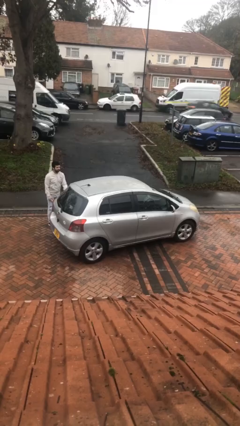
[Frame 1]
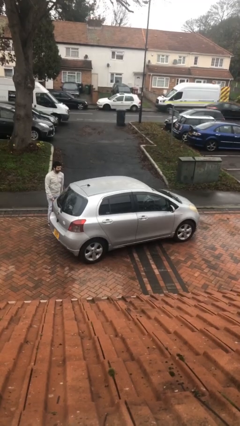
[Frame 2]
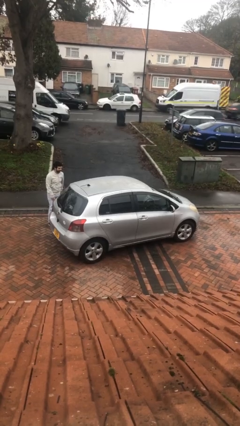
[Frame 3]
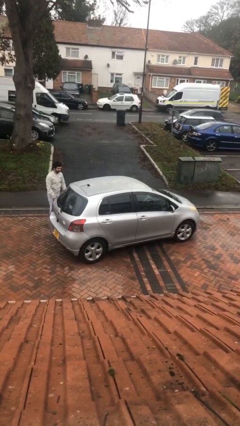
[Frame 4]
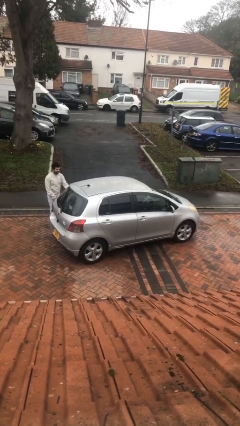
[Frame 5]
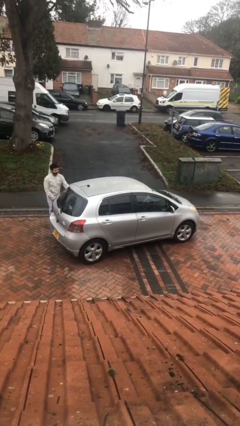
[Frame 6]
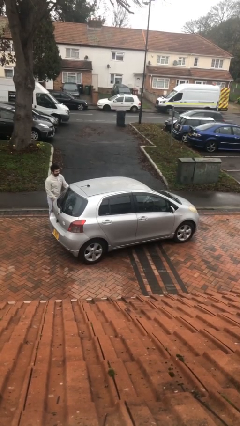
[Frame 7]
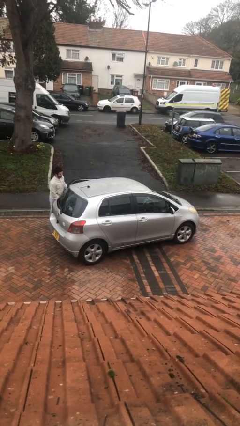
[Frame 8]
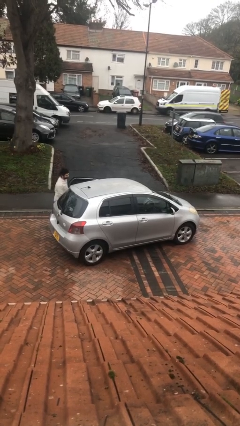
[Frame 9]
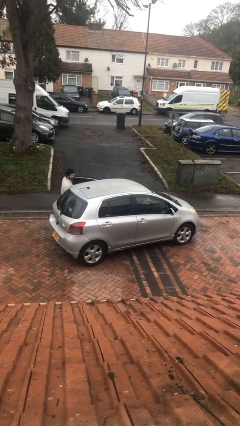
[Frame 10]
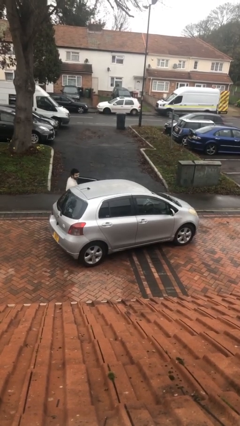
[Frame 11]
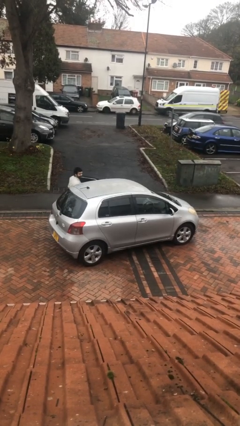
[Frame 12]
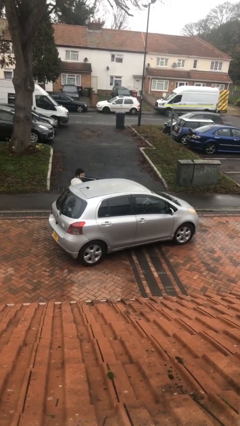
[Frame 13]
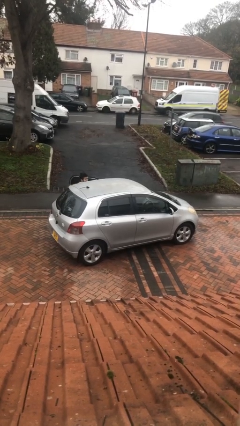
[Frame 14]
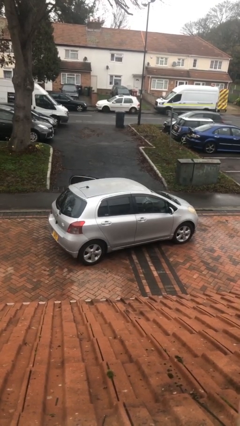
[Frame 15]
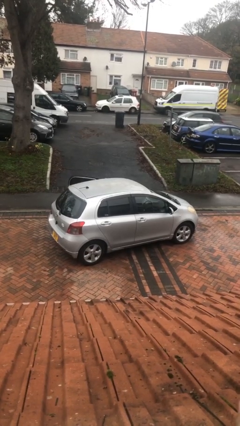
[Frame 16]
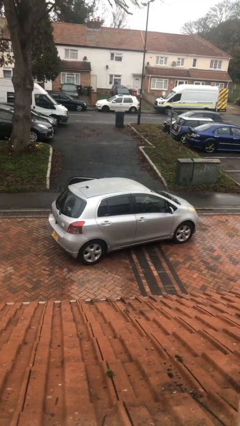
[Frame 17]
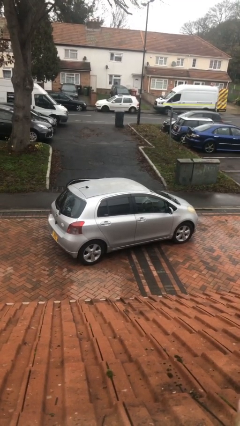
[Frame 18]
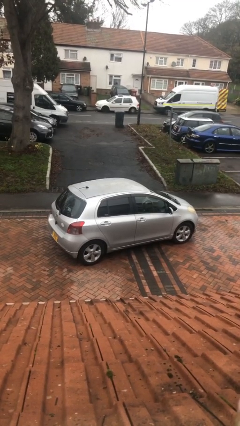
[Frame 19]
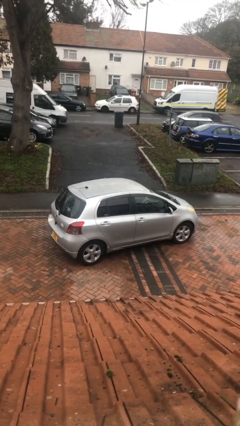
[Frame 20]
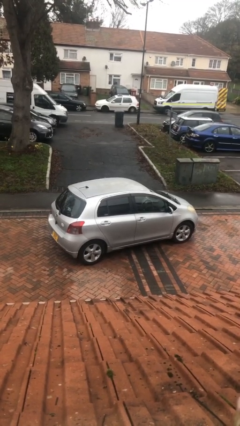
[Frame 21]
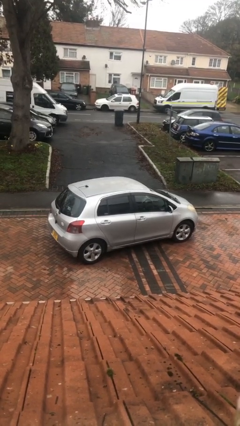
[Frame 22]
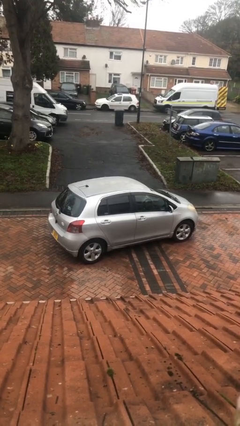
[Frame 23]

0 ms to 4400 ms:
car picks up person

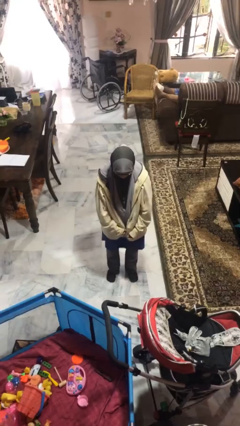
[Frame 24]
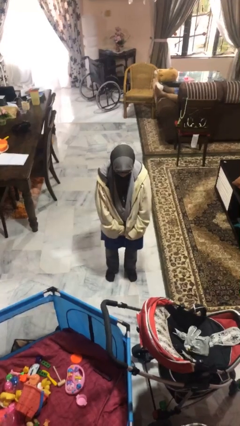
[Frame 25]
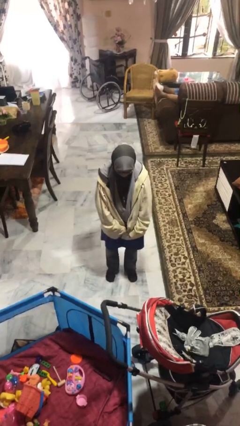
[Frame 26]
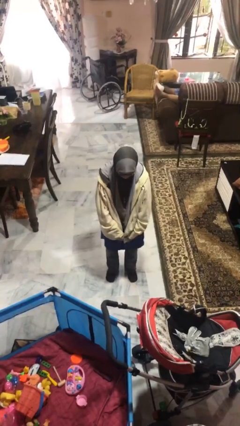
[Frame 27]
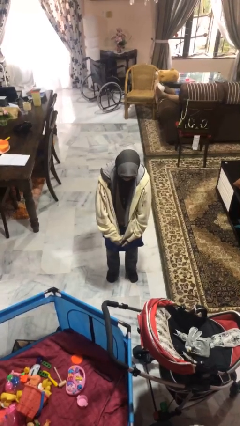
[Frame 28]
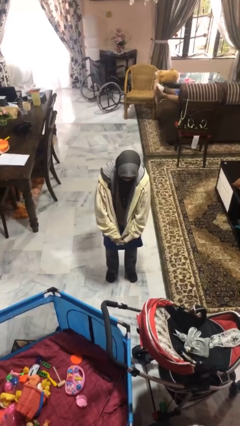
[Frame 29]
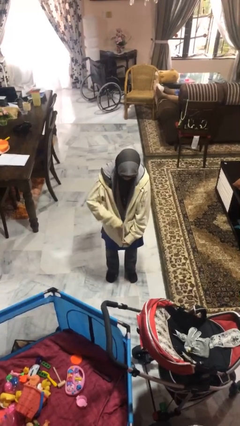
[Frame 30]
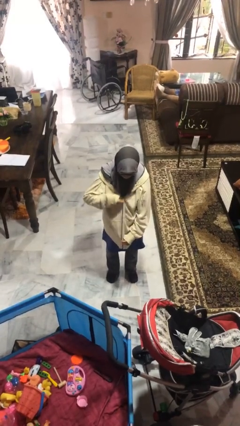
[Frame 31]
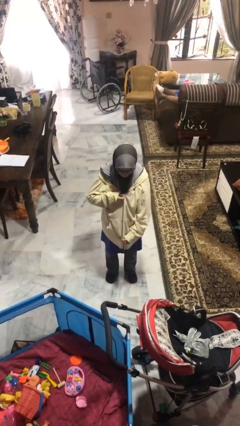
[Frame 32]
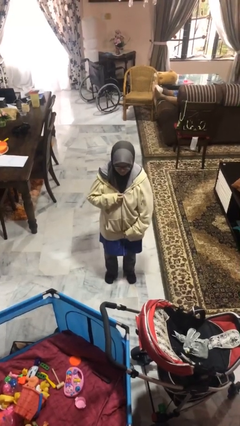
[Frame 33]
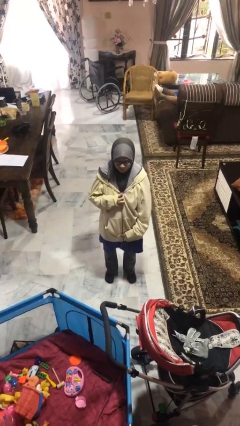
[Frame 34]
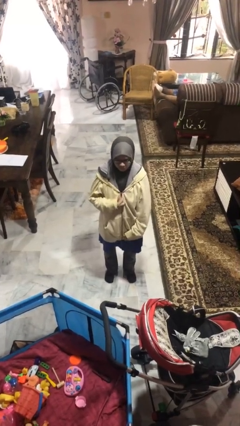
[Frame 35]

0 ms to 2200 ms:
person zips up jacket

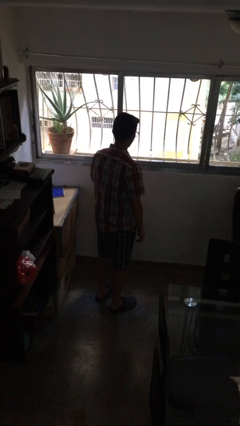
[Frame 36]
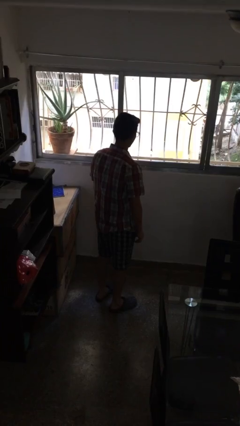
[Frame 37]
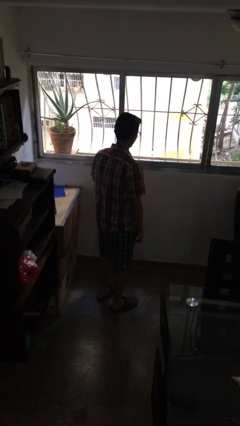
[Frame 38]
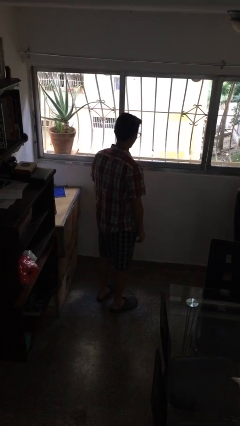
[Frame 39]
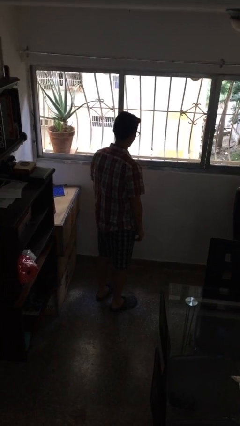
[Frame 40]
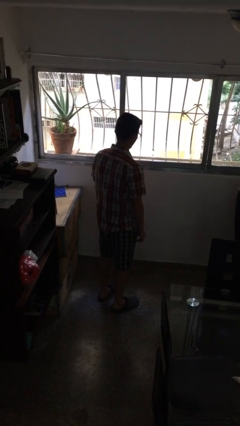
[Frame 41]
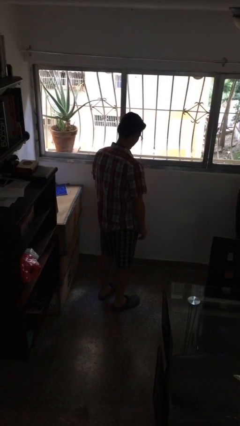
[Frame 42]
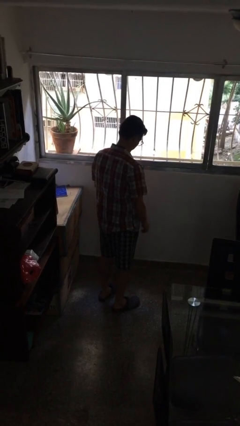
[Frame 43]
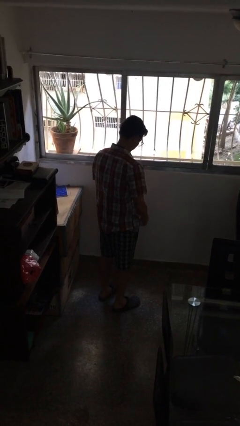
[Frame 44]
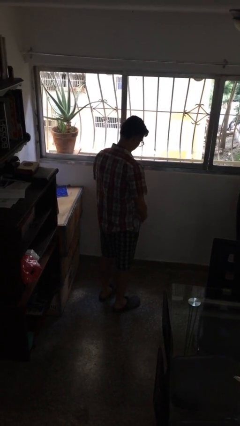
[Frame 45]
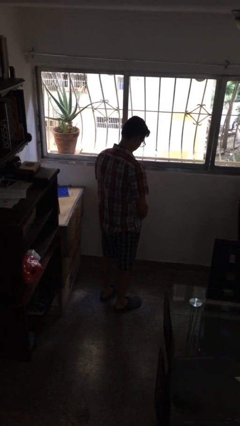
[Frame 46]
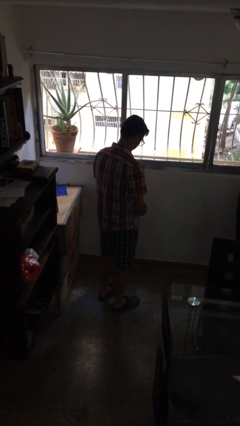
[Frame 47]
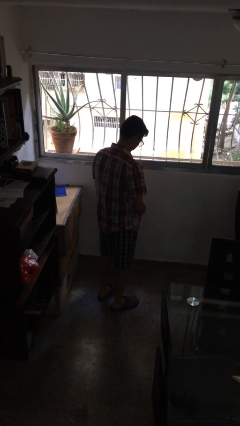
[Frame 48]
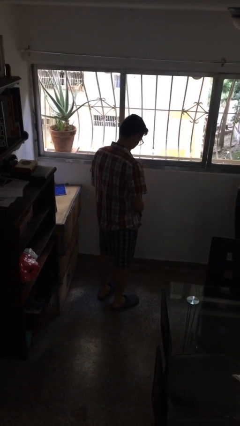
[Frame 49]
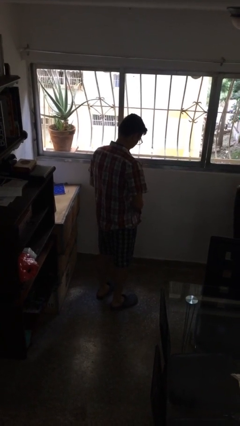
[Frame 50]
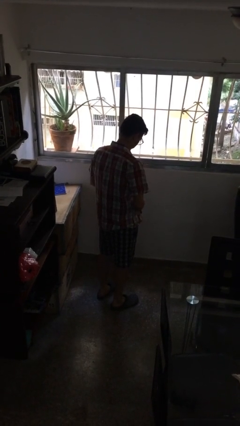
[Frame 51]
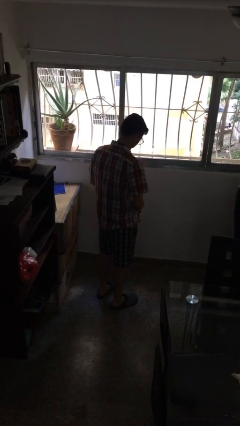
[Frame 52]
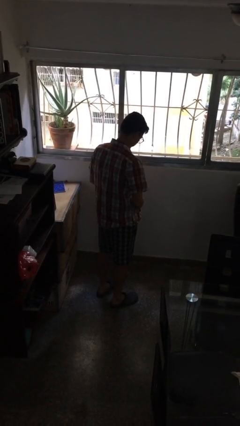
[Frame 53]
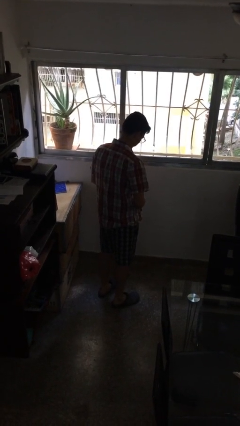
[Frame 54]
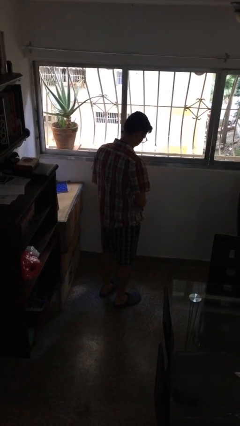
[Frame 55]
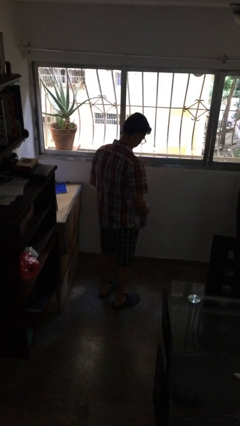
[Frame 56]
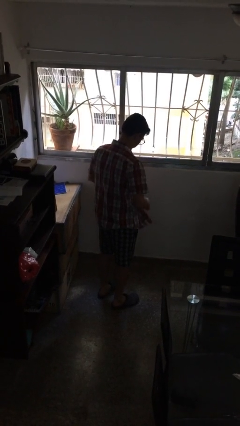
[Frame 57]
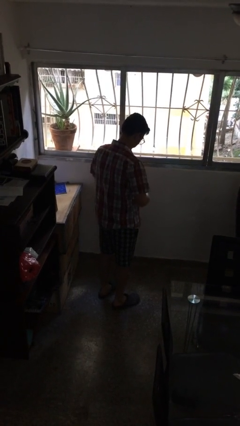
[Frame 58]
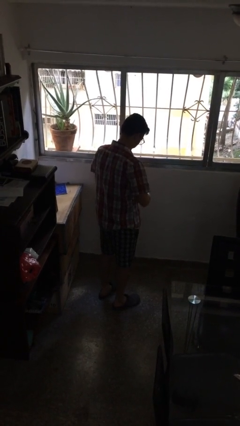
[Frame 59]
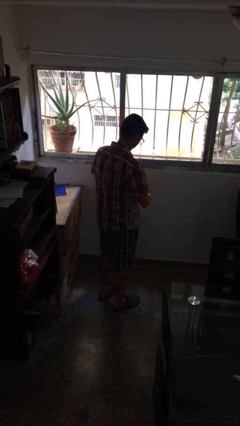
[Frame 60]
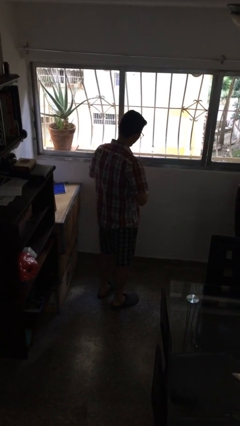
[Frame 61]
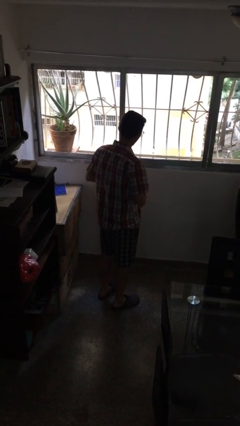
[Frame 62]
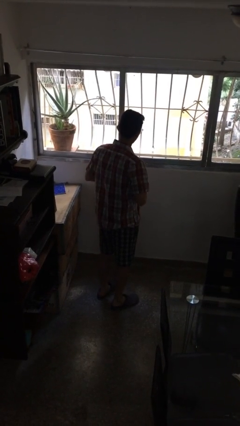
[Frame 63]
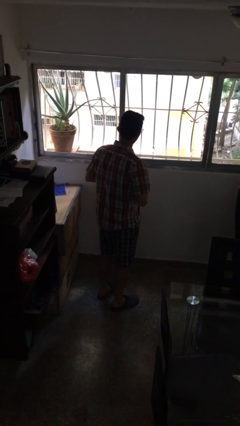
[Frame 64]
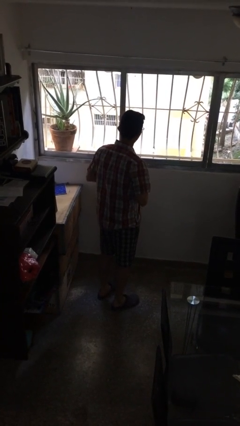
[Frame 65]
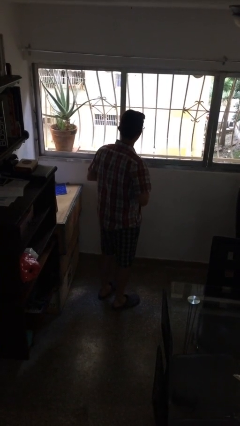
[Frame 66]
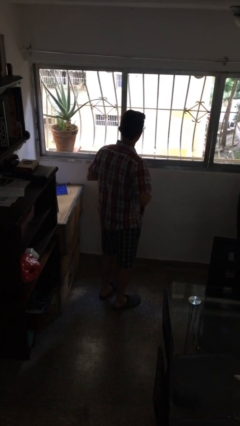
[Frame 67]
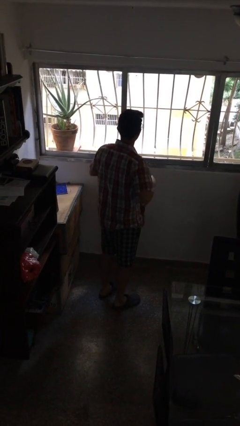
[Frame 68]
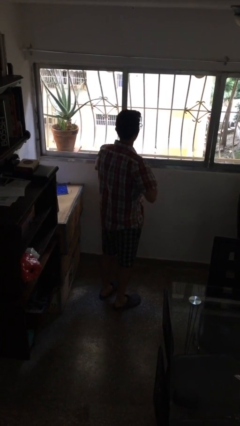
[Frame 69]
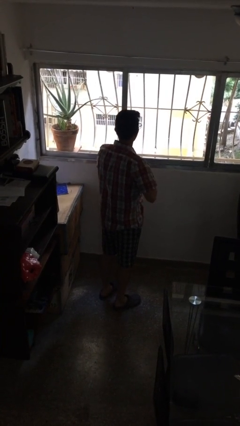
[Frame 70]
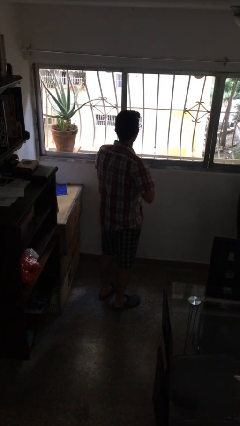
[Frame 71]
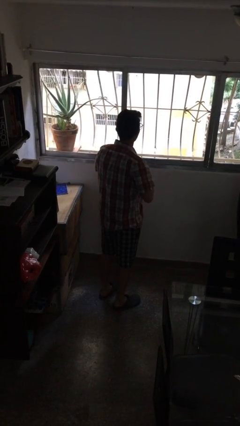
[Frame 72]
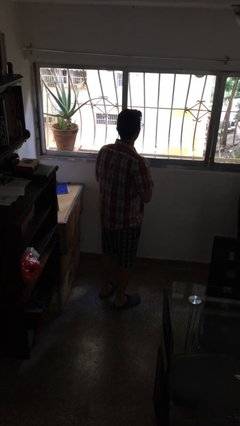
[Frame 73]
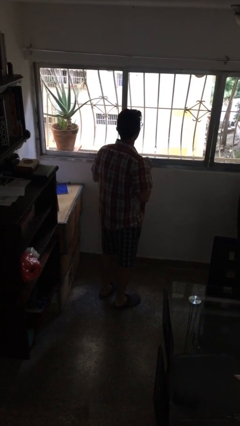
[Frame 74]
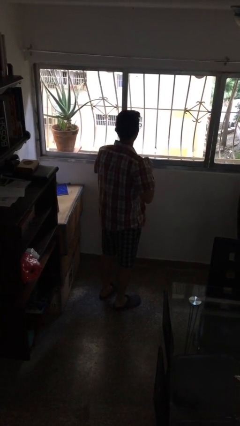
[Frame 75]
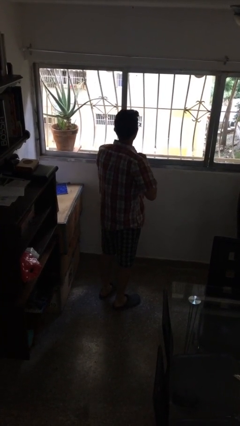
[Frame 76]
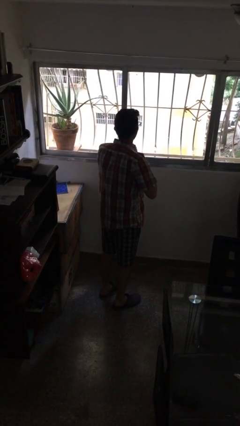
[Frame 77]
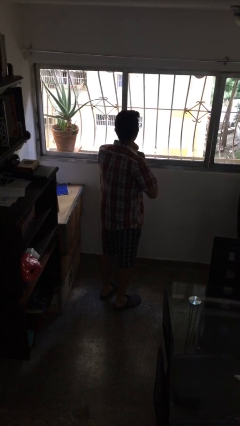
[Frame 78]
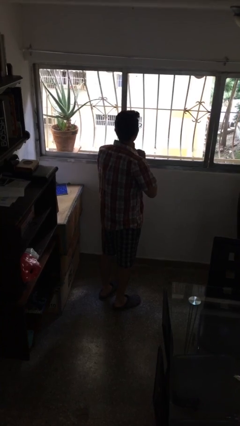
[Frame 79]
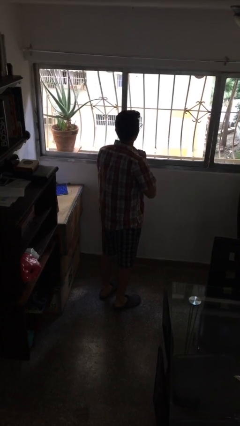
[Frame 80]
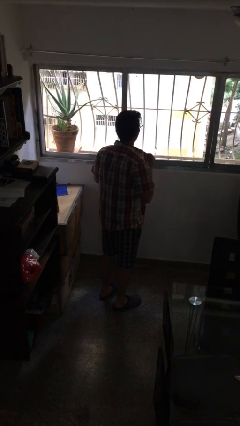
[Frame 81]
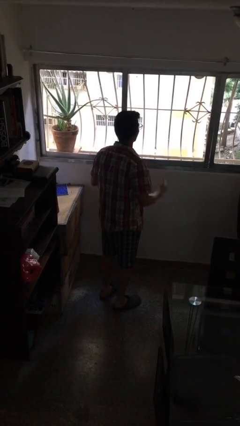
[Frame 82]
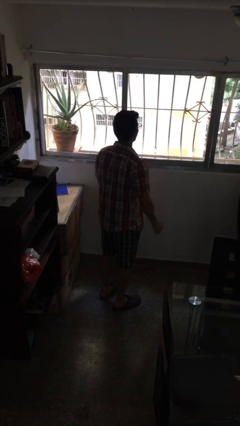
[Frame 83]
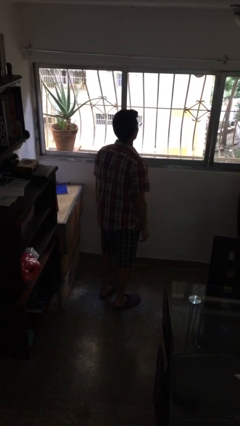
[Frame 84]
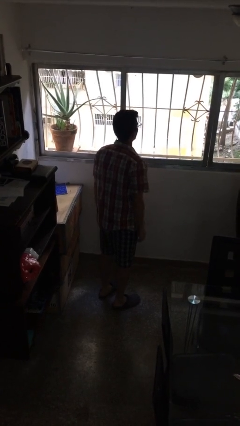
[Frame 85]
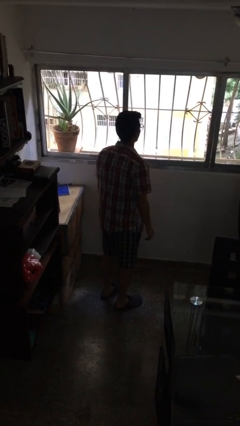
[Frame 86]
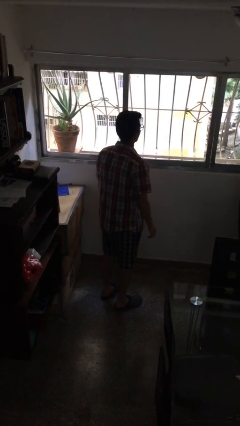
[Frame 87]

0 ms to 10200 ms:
person buttons shirt

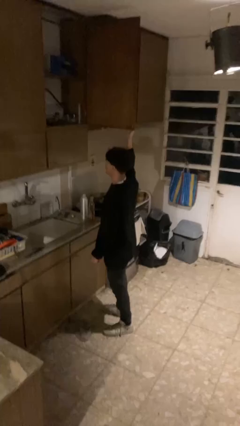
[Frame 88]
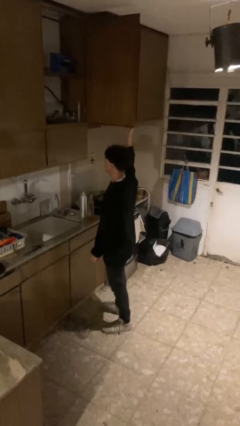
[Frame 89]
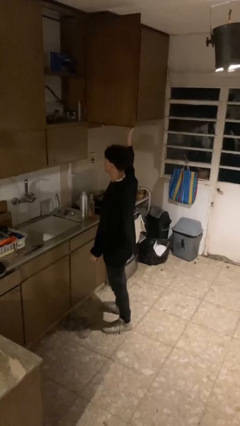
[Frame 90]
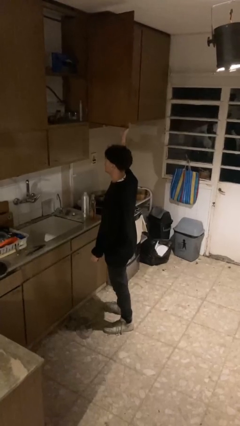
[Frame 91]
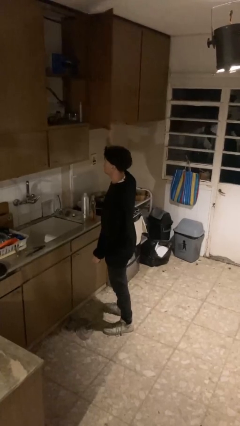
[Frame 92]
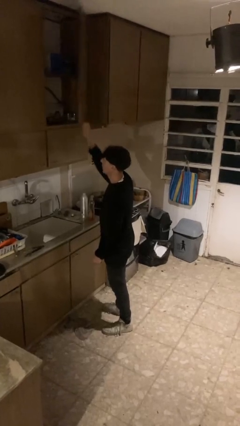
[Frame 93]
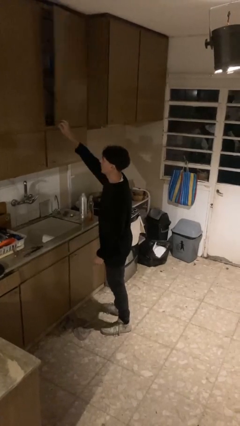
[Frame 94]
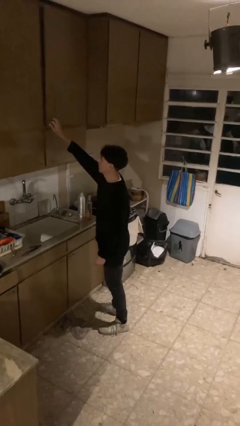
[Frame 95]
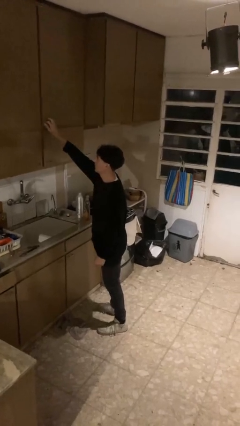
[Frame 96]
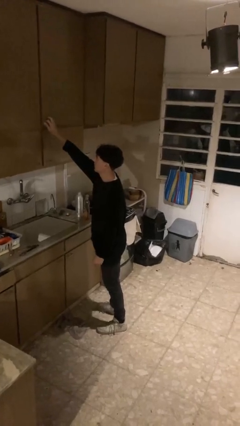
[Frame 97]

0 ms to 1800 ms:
person closes cabinet
